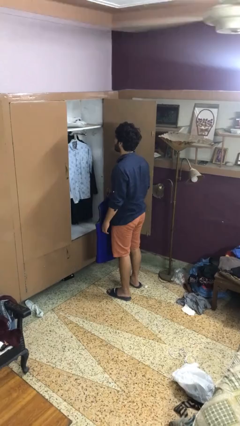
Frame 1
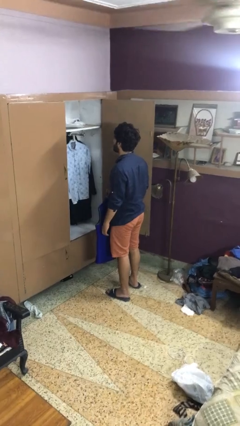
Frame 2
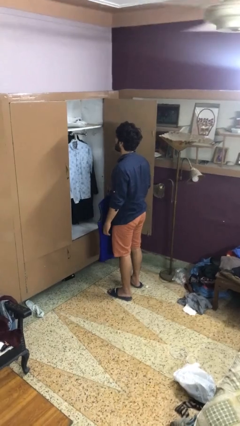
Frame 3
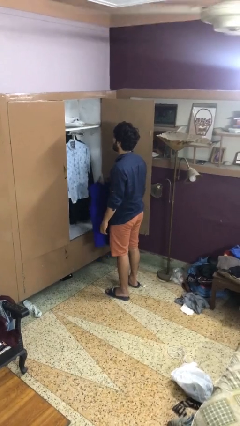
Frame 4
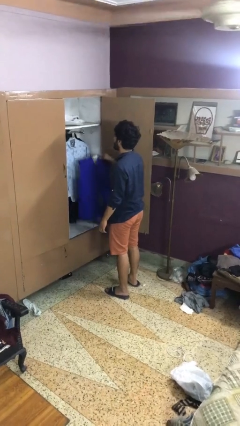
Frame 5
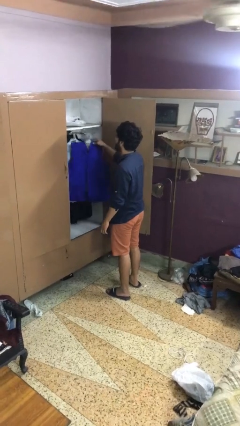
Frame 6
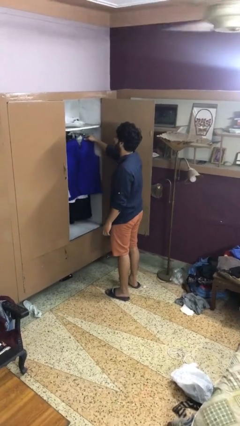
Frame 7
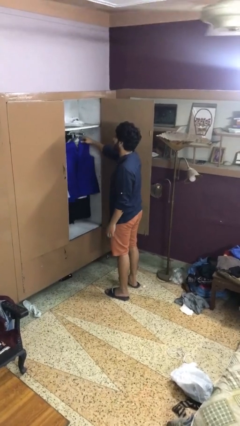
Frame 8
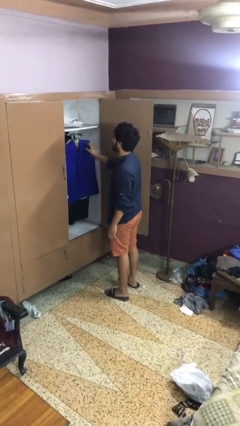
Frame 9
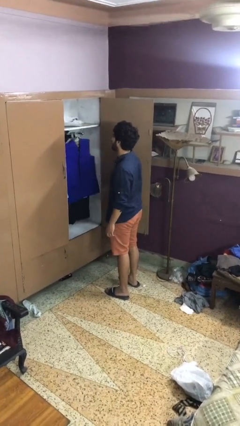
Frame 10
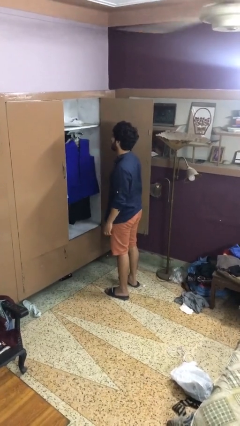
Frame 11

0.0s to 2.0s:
person puts clothes into closet

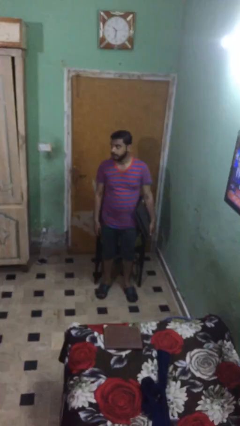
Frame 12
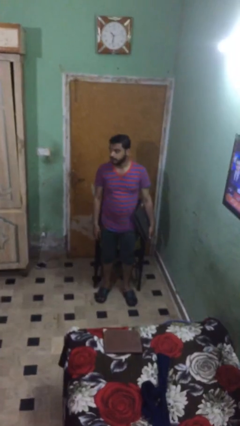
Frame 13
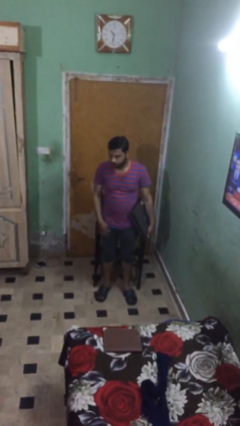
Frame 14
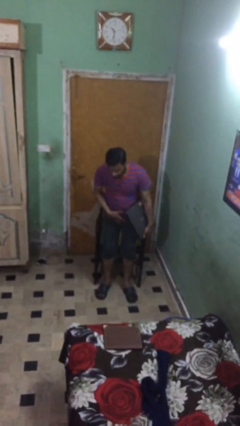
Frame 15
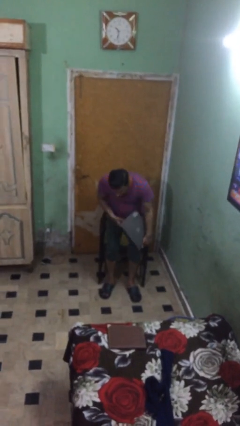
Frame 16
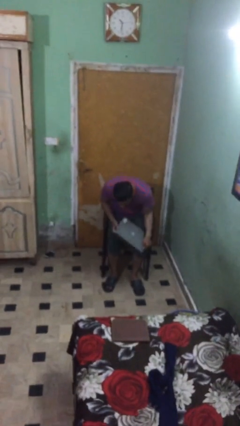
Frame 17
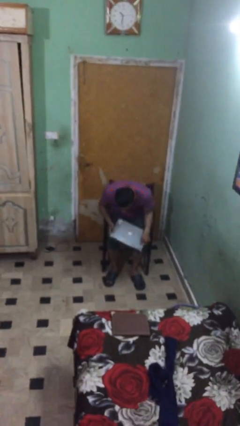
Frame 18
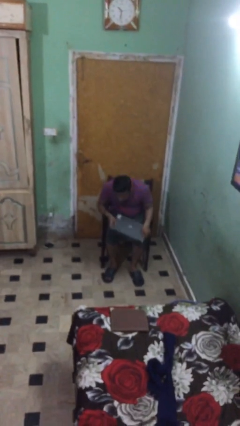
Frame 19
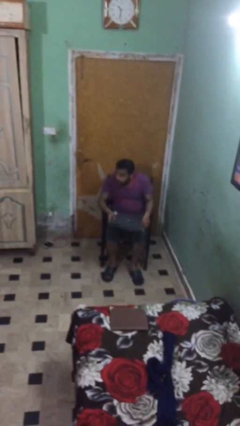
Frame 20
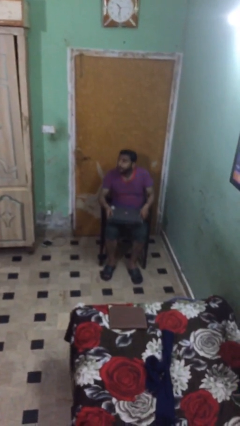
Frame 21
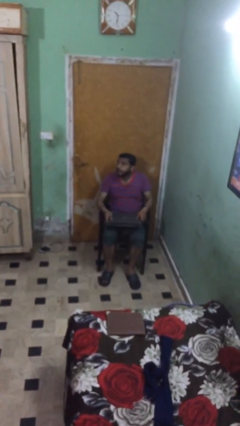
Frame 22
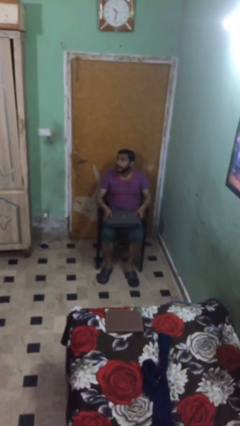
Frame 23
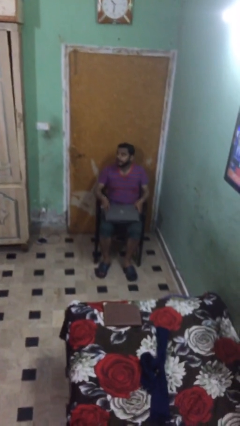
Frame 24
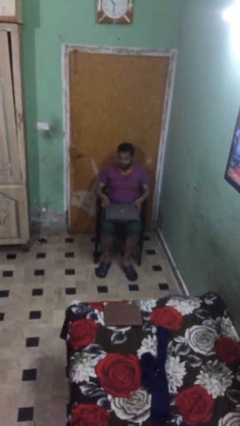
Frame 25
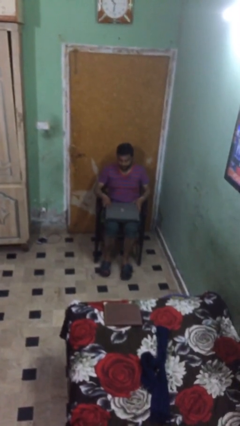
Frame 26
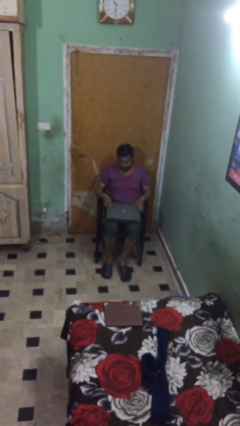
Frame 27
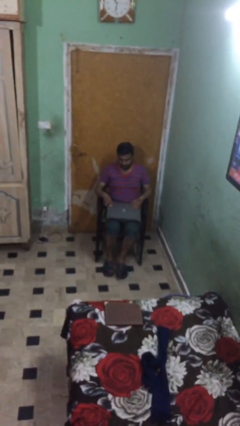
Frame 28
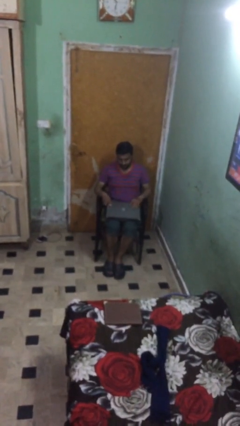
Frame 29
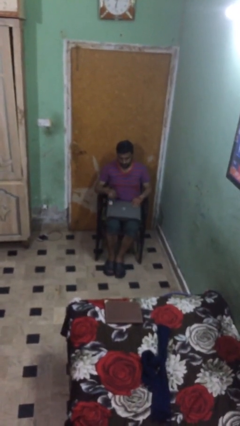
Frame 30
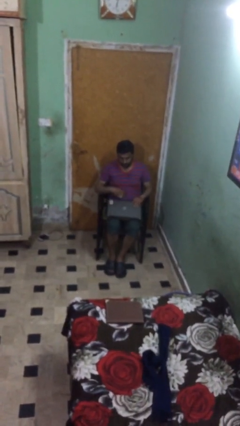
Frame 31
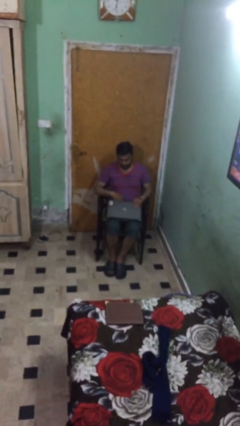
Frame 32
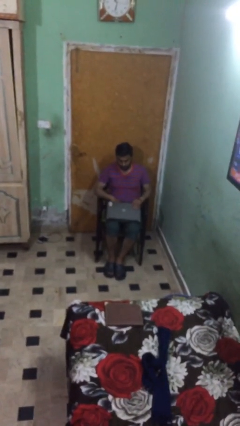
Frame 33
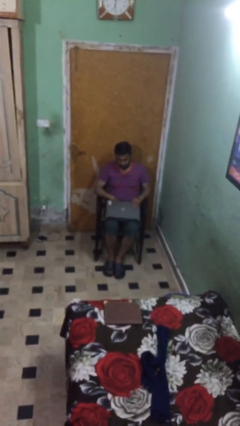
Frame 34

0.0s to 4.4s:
person sits down

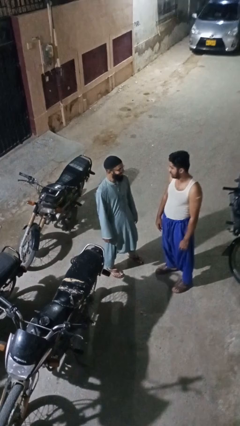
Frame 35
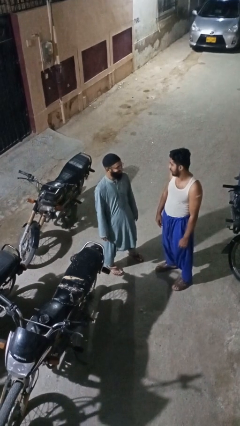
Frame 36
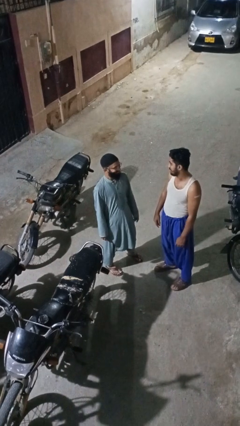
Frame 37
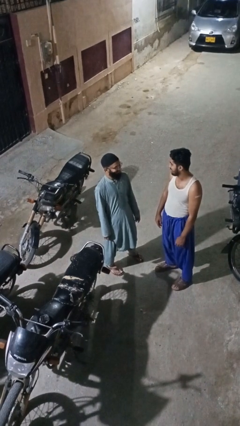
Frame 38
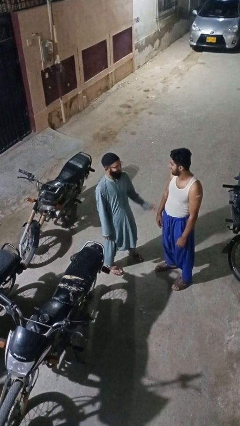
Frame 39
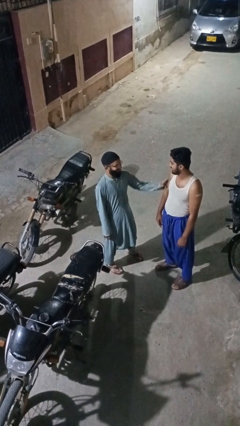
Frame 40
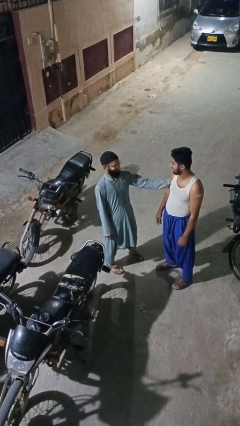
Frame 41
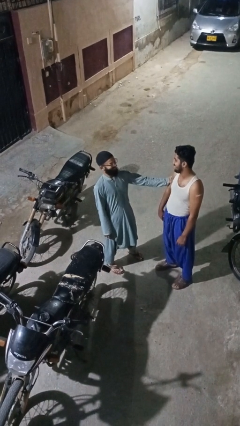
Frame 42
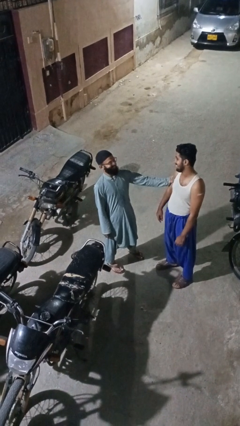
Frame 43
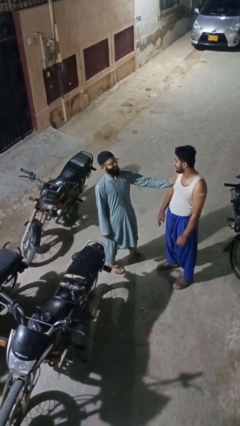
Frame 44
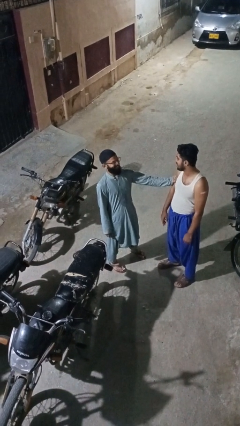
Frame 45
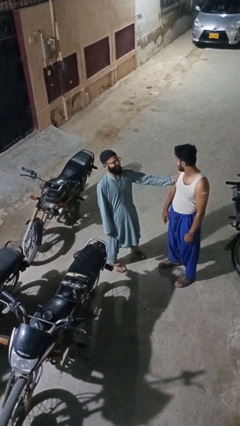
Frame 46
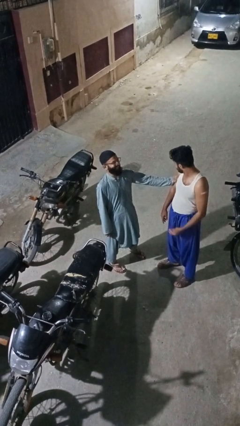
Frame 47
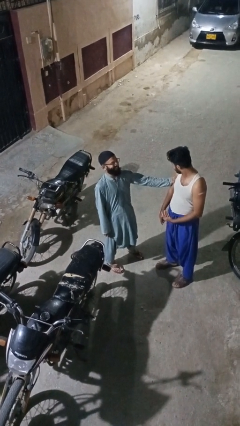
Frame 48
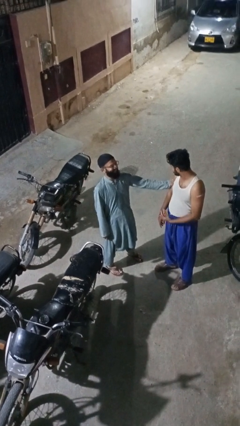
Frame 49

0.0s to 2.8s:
person grabs person by bicep

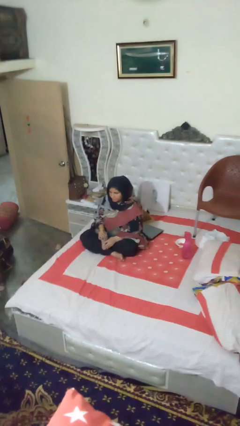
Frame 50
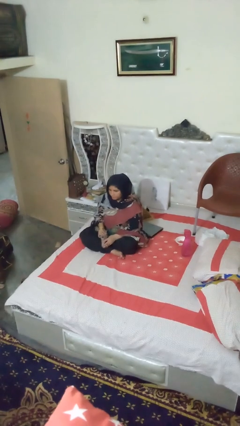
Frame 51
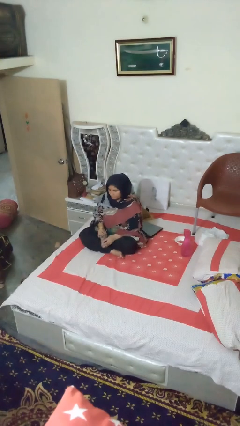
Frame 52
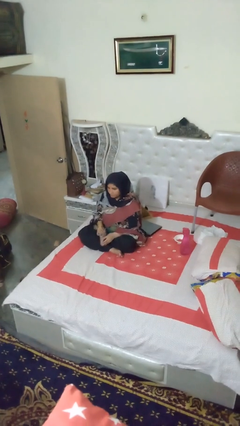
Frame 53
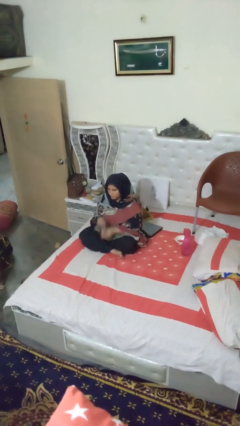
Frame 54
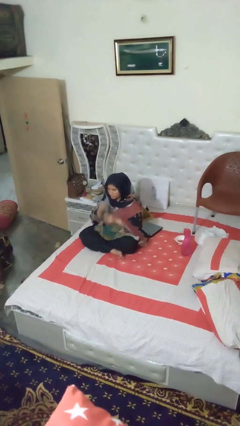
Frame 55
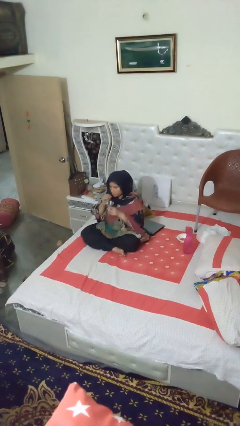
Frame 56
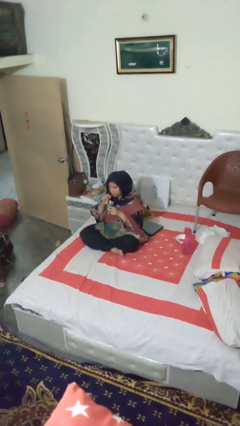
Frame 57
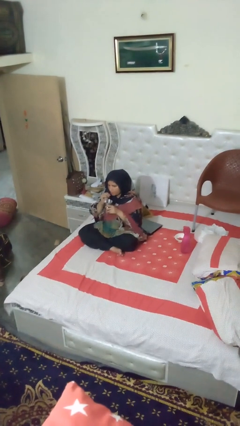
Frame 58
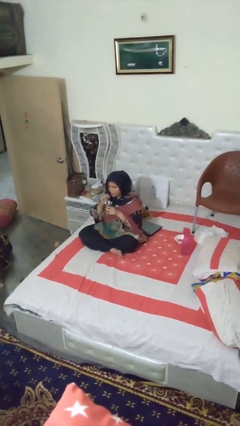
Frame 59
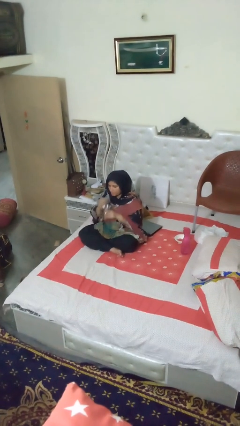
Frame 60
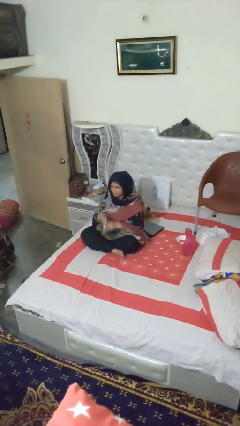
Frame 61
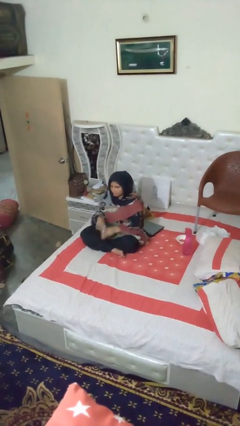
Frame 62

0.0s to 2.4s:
person drinks from straw

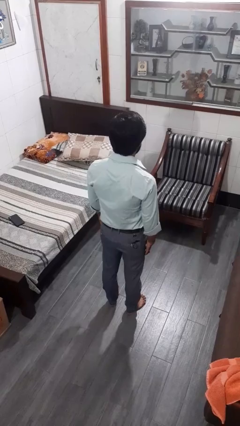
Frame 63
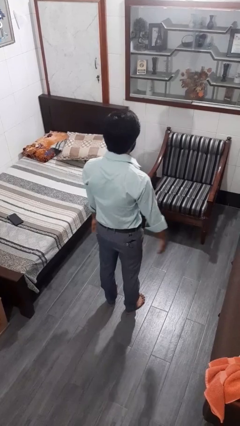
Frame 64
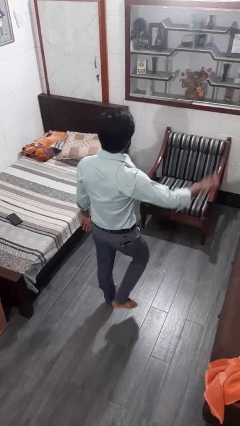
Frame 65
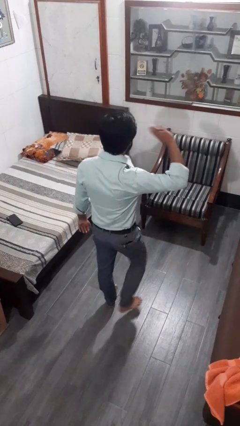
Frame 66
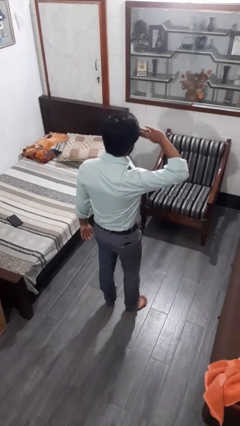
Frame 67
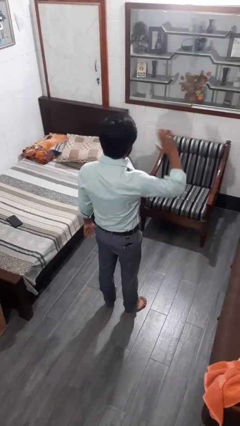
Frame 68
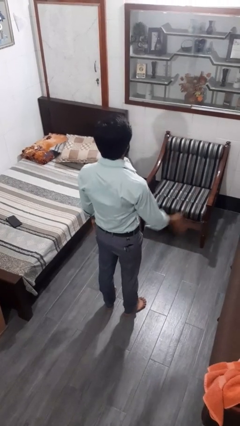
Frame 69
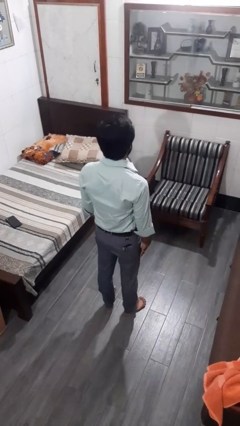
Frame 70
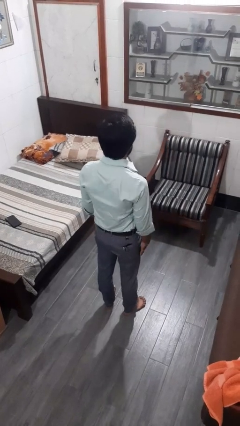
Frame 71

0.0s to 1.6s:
person salutes

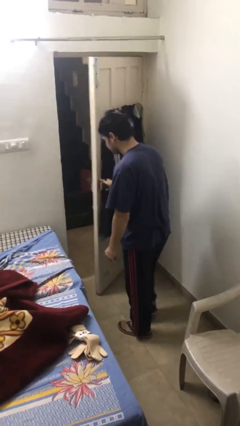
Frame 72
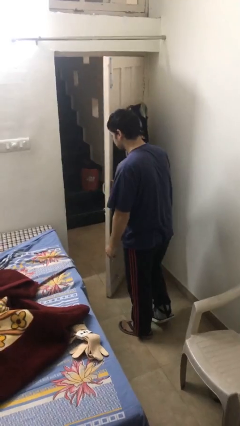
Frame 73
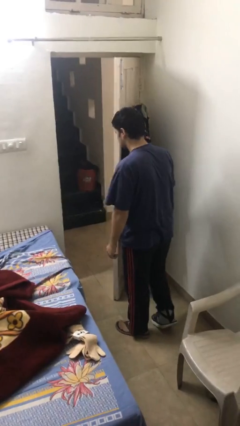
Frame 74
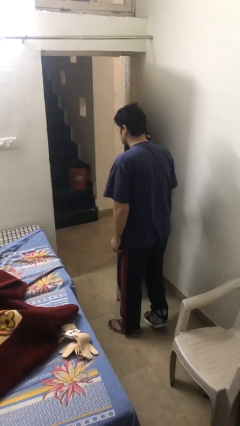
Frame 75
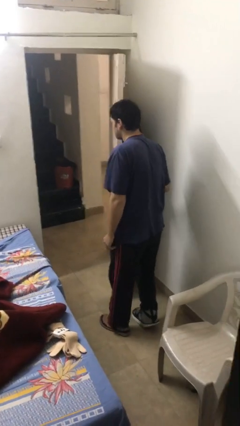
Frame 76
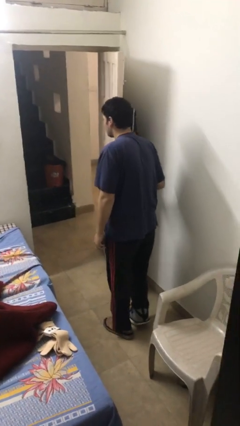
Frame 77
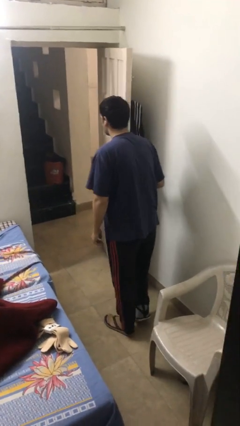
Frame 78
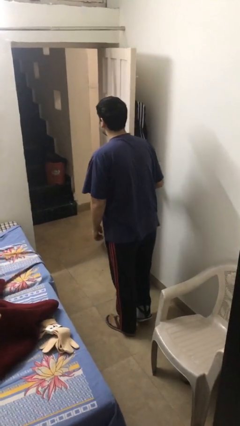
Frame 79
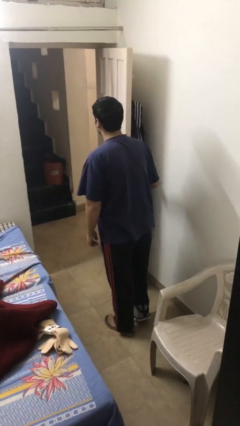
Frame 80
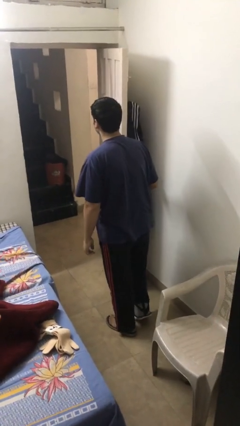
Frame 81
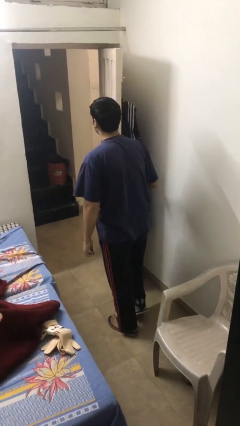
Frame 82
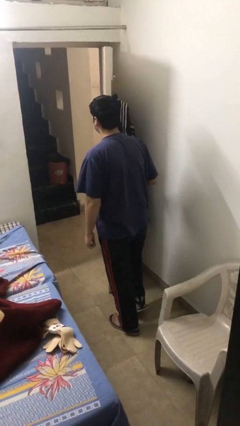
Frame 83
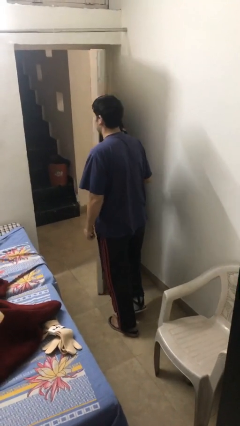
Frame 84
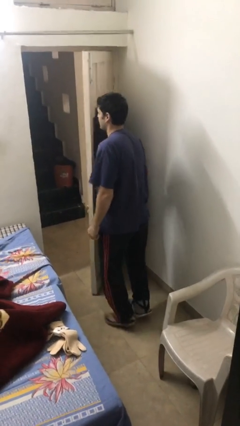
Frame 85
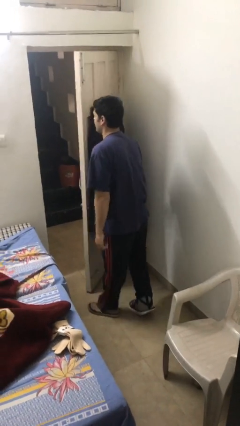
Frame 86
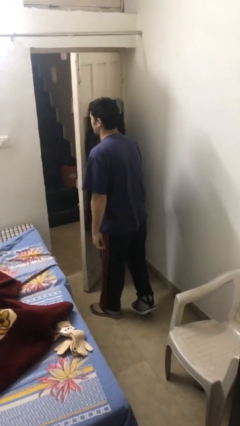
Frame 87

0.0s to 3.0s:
person opens facility door

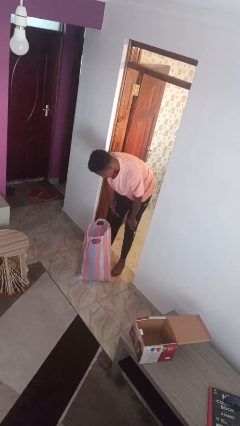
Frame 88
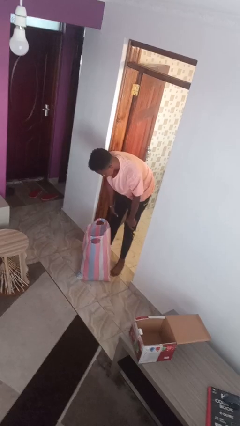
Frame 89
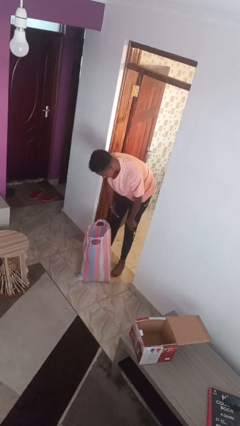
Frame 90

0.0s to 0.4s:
person searches in bag

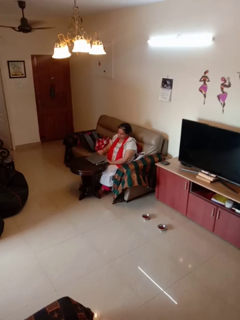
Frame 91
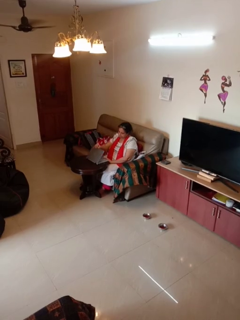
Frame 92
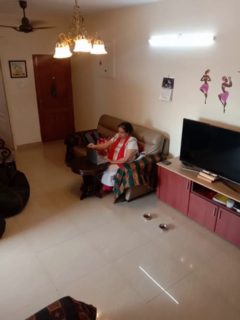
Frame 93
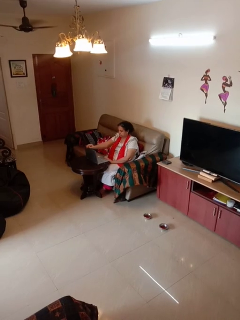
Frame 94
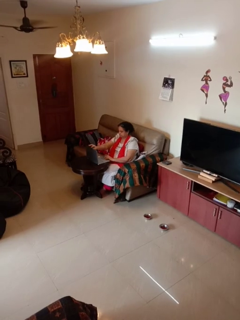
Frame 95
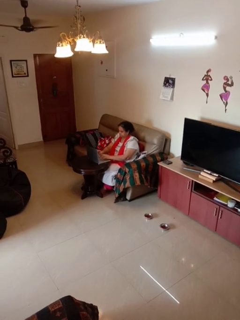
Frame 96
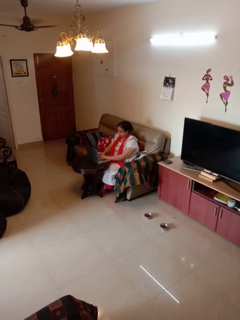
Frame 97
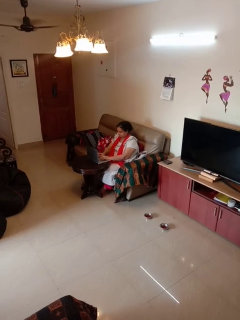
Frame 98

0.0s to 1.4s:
person opens laptop
